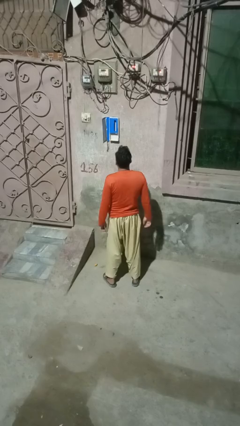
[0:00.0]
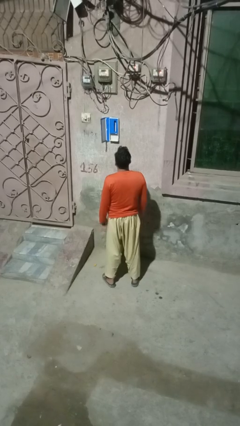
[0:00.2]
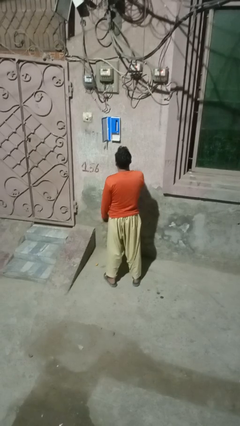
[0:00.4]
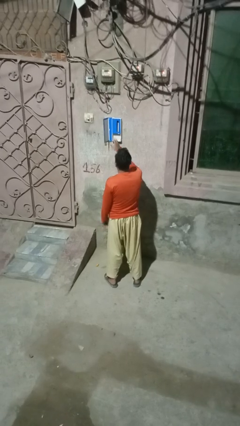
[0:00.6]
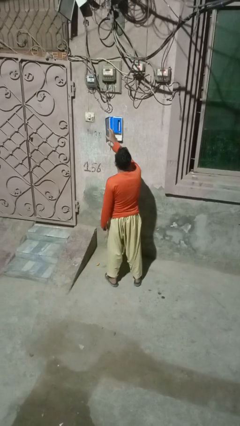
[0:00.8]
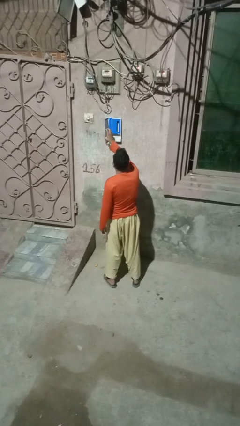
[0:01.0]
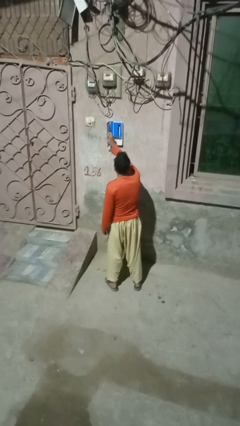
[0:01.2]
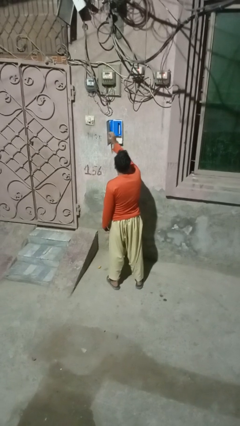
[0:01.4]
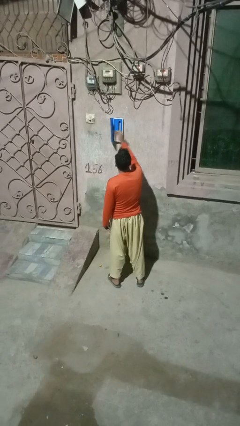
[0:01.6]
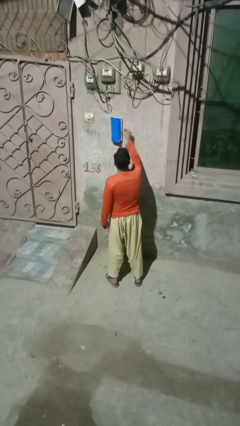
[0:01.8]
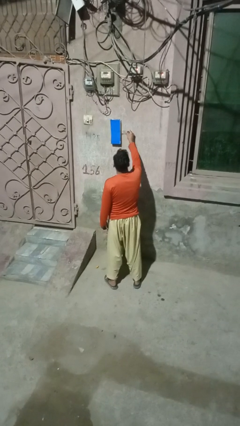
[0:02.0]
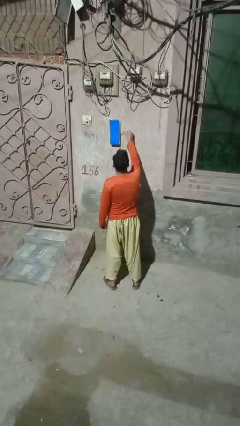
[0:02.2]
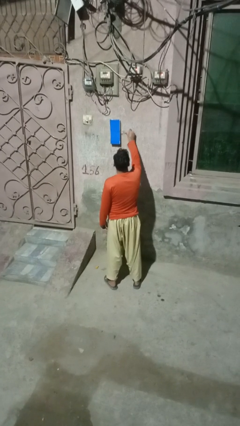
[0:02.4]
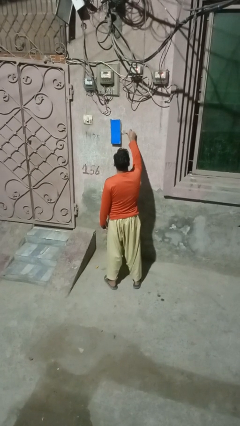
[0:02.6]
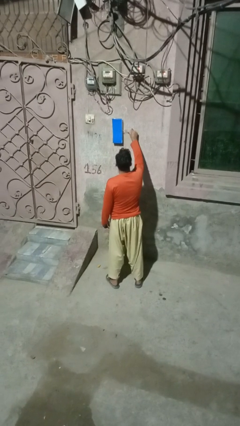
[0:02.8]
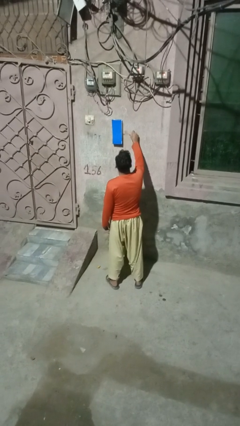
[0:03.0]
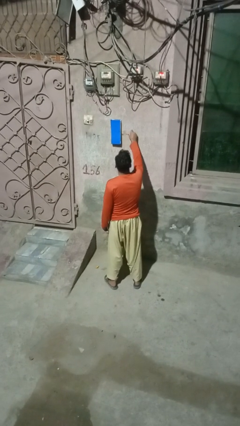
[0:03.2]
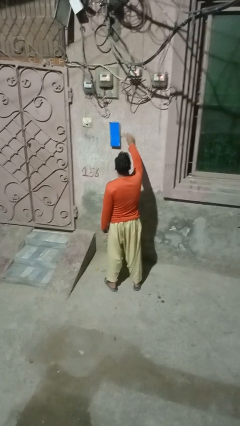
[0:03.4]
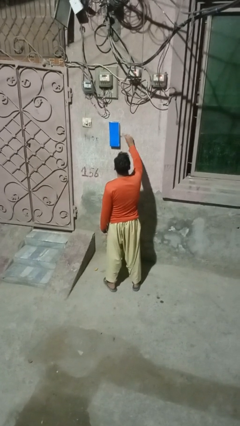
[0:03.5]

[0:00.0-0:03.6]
person closes mailbox

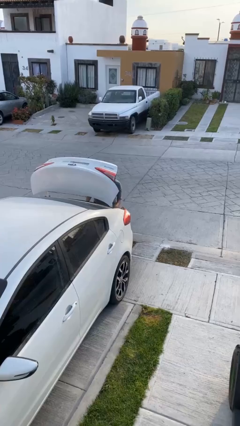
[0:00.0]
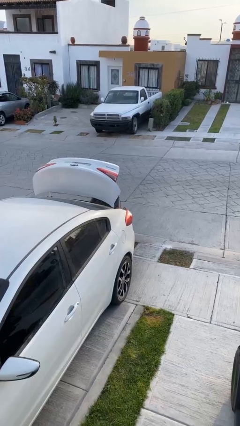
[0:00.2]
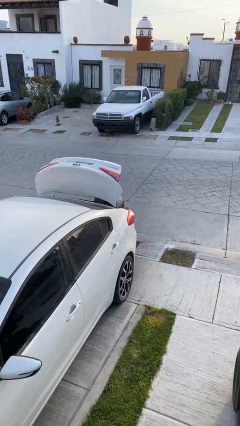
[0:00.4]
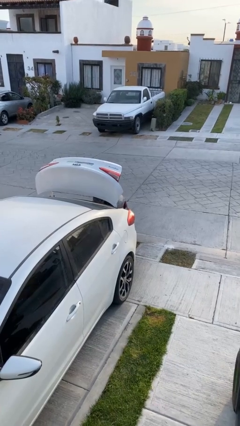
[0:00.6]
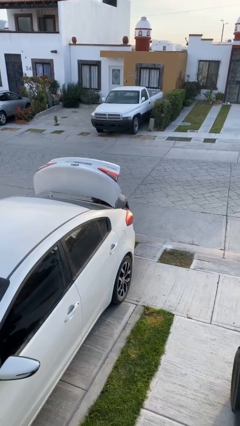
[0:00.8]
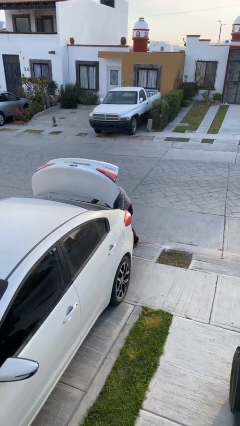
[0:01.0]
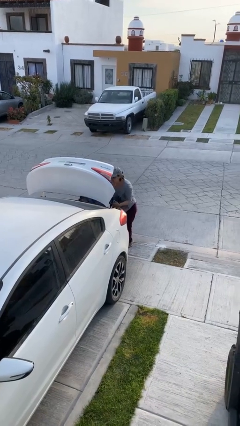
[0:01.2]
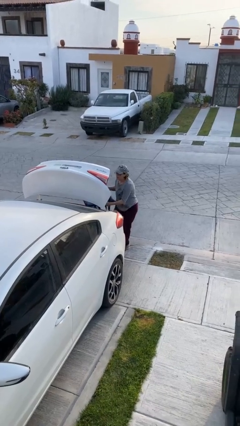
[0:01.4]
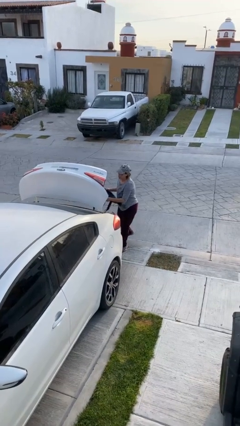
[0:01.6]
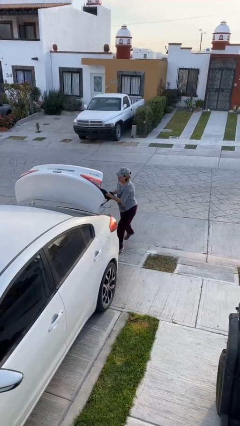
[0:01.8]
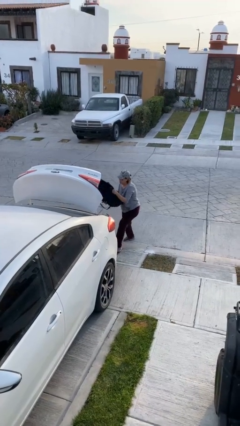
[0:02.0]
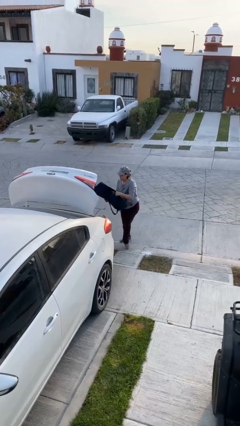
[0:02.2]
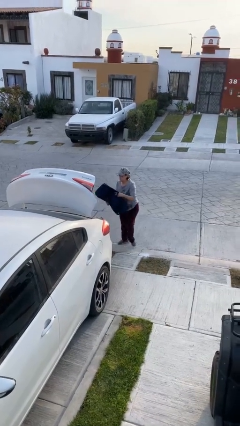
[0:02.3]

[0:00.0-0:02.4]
person unloads car

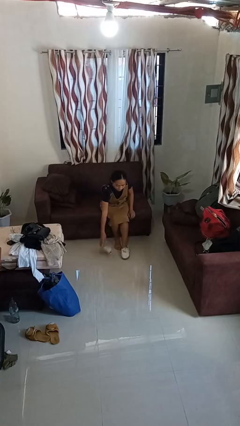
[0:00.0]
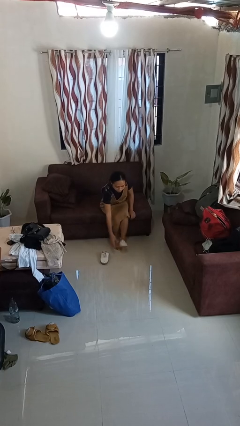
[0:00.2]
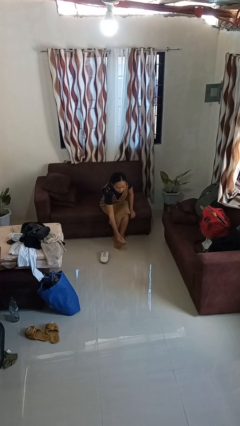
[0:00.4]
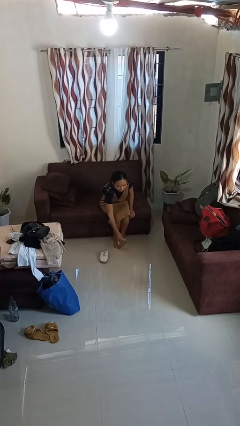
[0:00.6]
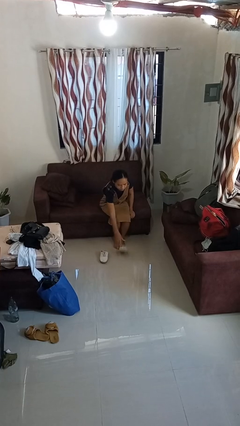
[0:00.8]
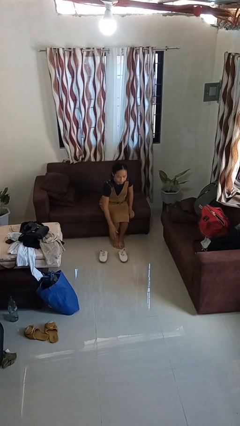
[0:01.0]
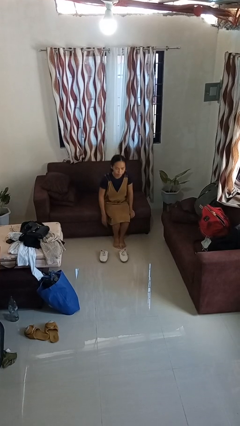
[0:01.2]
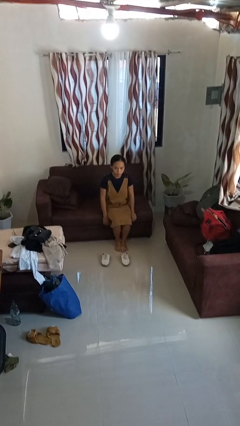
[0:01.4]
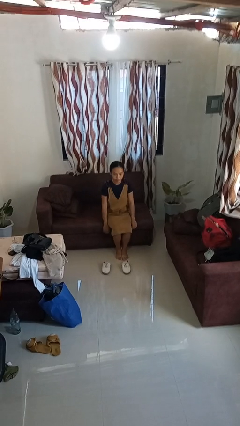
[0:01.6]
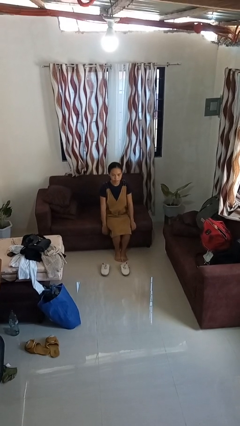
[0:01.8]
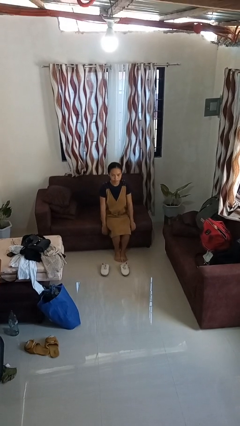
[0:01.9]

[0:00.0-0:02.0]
person takes off shoes

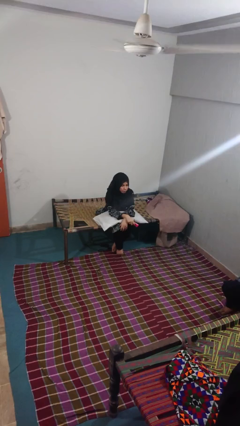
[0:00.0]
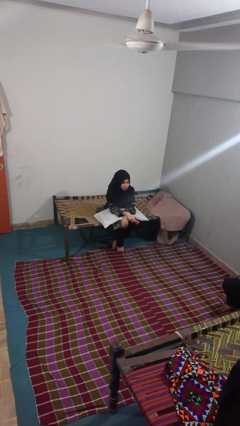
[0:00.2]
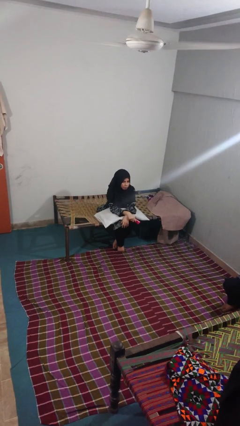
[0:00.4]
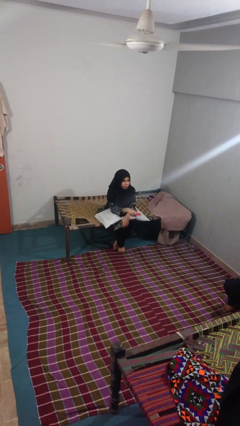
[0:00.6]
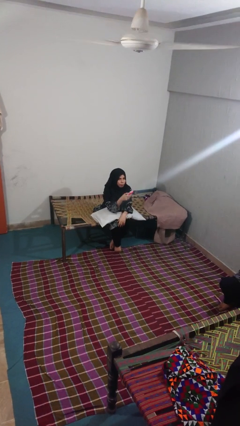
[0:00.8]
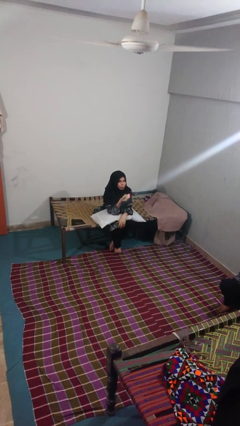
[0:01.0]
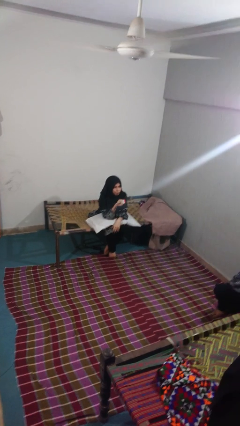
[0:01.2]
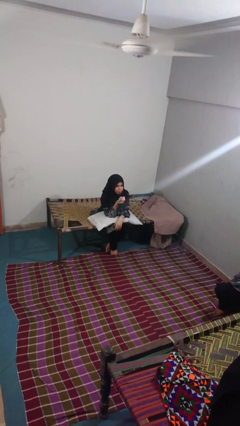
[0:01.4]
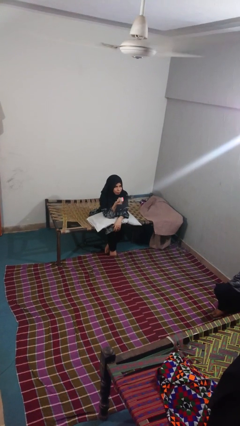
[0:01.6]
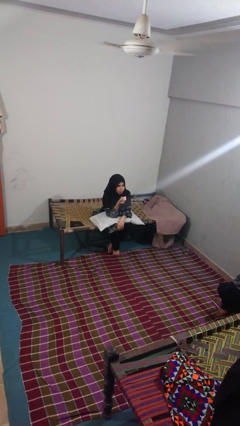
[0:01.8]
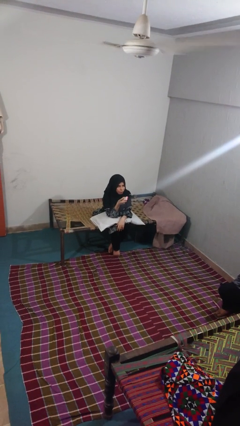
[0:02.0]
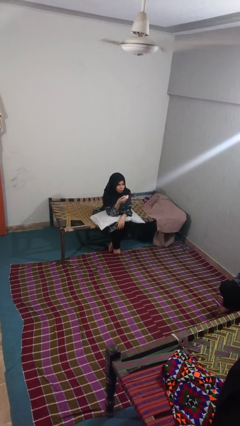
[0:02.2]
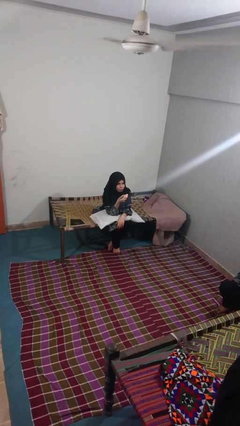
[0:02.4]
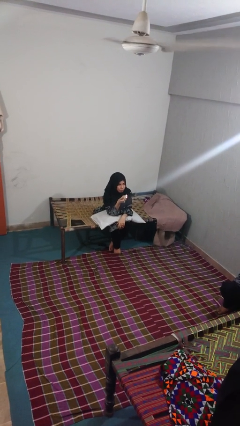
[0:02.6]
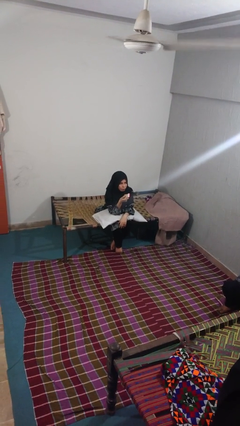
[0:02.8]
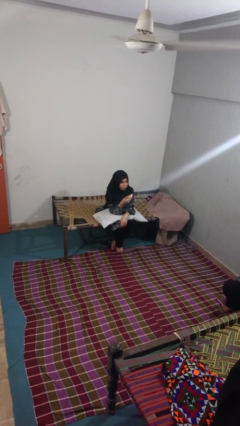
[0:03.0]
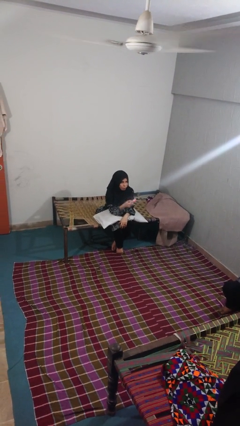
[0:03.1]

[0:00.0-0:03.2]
person uses television remote

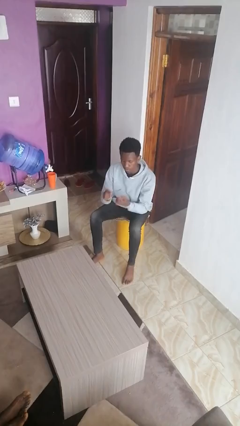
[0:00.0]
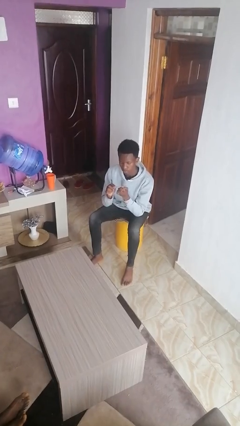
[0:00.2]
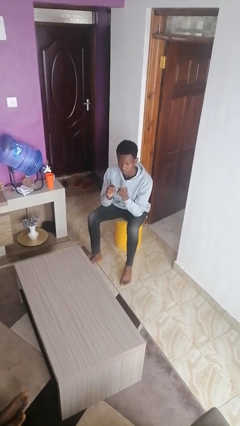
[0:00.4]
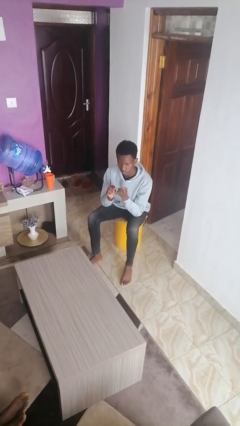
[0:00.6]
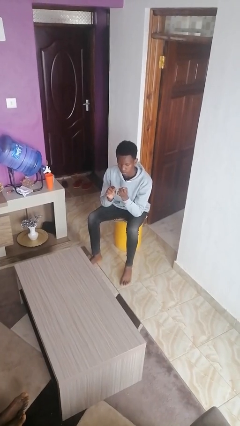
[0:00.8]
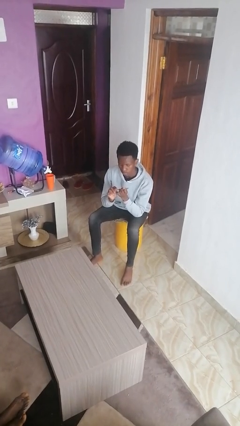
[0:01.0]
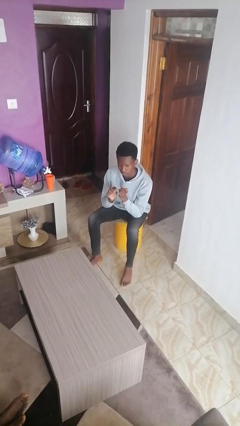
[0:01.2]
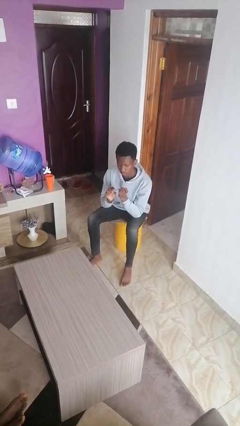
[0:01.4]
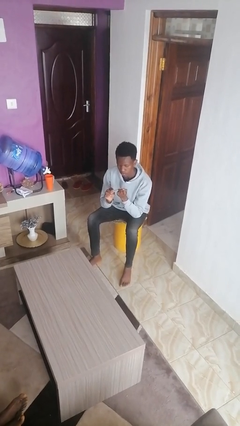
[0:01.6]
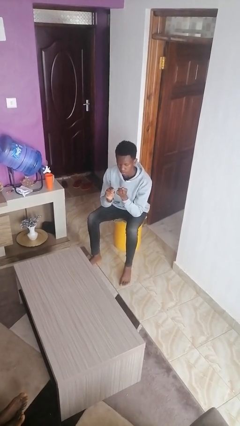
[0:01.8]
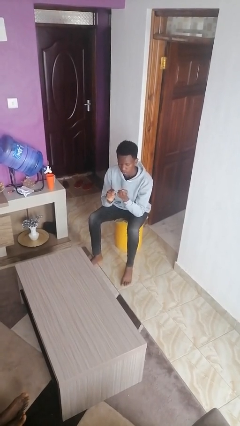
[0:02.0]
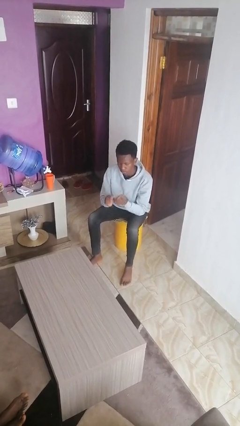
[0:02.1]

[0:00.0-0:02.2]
person files fingernails

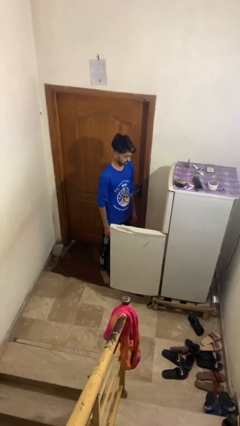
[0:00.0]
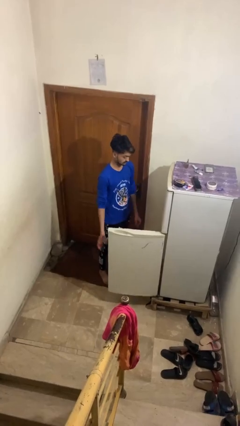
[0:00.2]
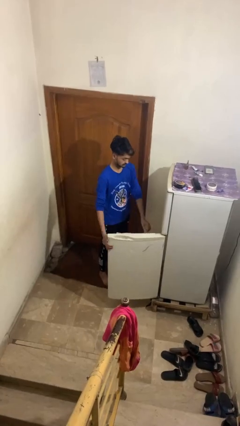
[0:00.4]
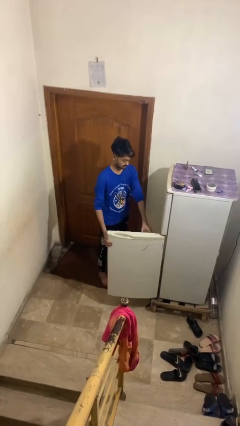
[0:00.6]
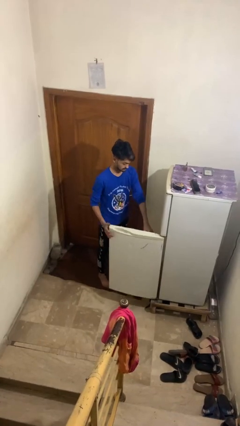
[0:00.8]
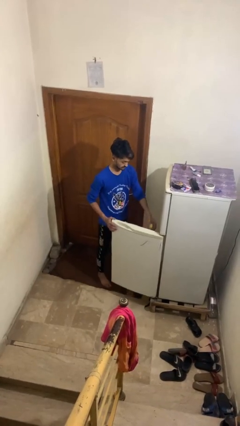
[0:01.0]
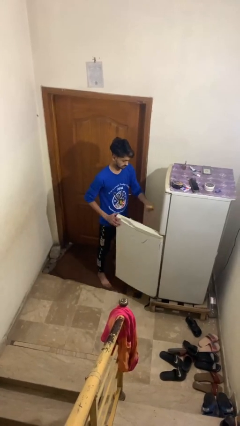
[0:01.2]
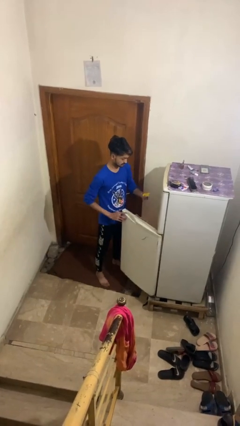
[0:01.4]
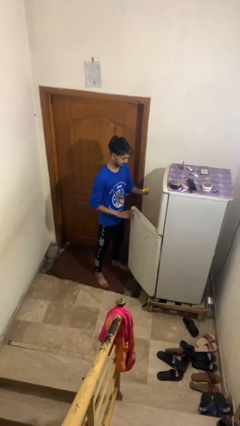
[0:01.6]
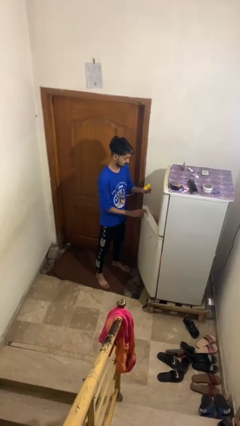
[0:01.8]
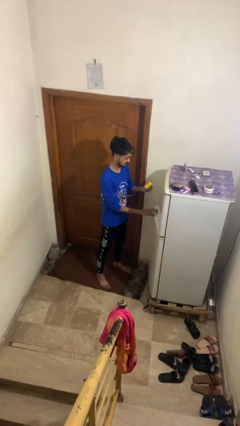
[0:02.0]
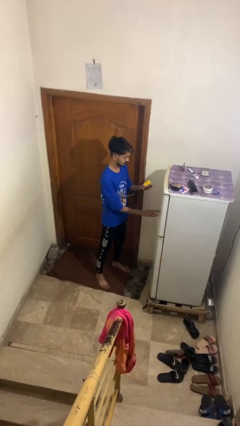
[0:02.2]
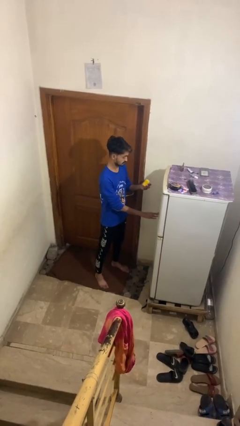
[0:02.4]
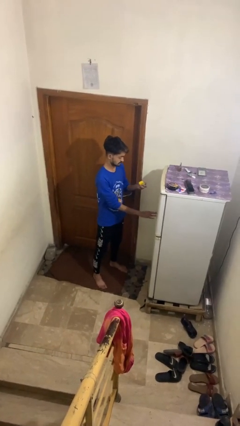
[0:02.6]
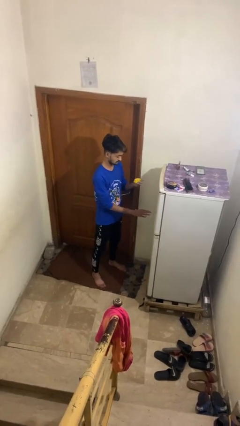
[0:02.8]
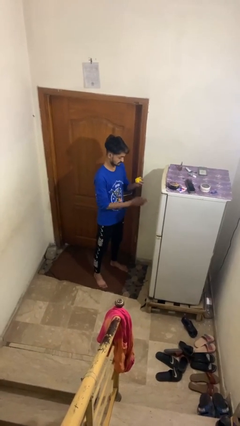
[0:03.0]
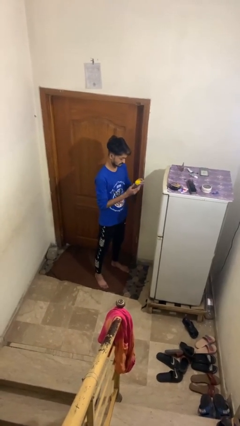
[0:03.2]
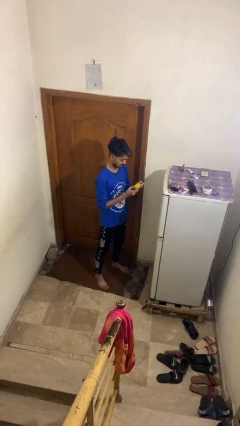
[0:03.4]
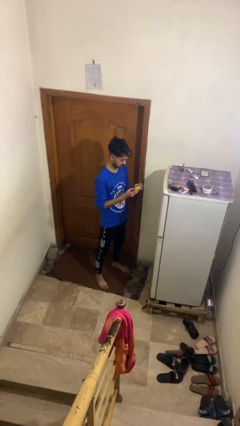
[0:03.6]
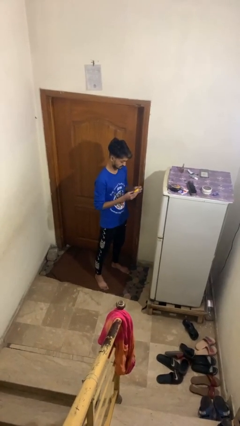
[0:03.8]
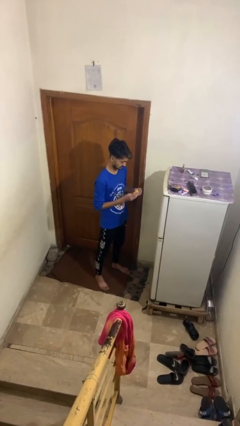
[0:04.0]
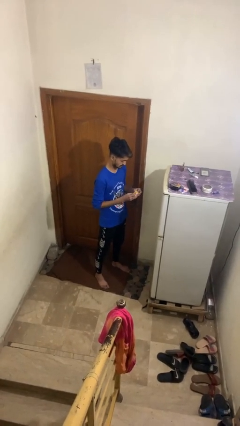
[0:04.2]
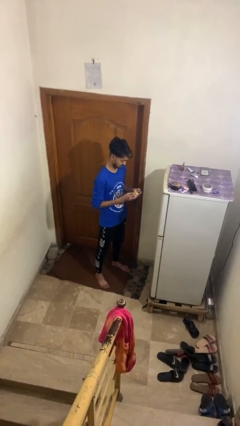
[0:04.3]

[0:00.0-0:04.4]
person takes object from refrigerator
